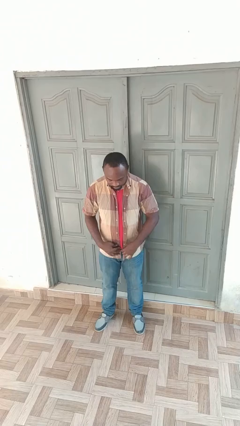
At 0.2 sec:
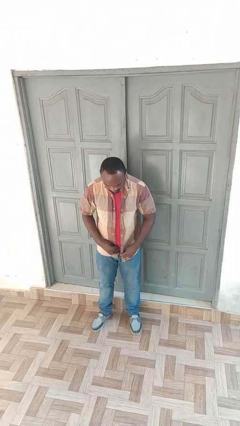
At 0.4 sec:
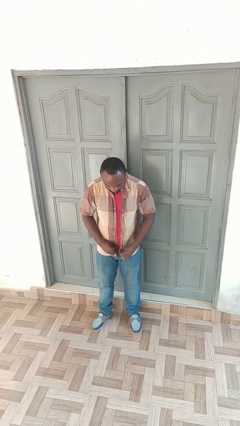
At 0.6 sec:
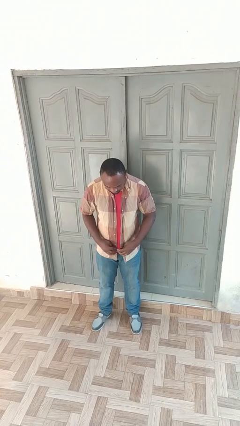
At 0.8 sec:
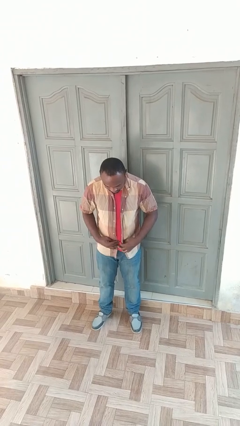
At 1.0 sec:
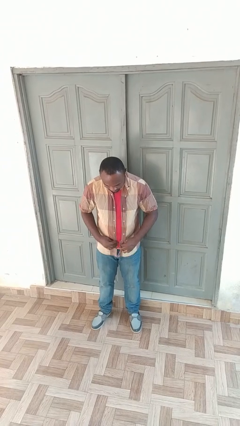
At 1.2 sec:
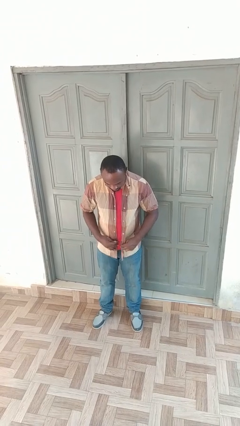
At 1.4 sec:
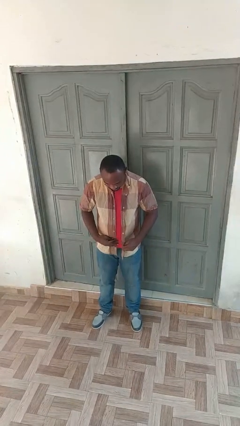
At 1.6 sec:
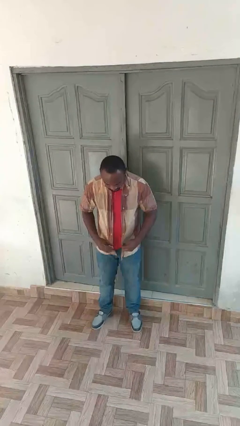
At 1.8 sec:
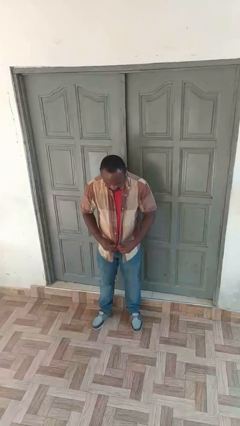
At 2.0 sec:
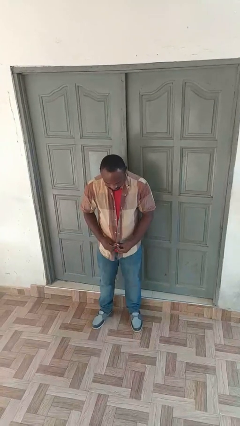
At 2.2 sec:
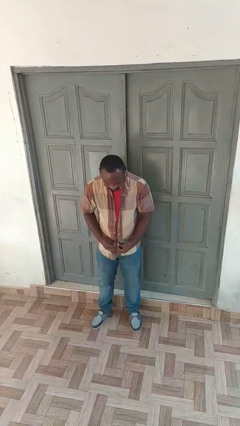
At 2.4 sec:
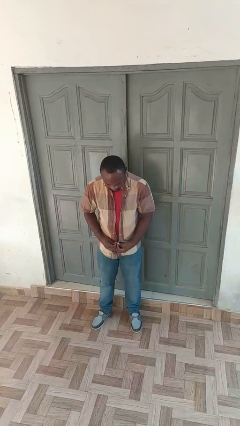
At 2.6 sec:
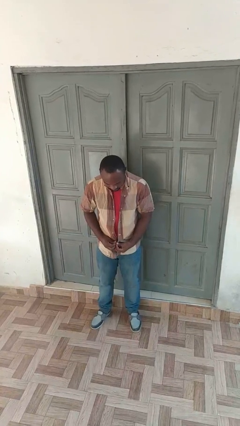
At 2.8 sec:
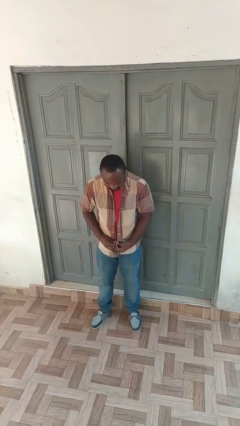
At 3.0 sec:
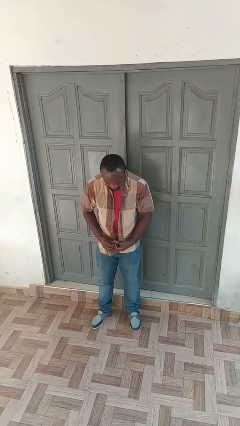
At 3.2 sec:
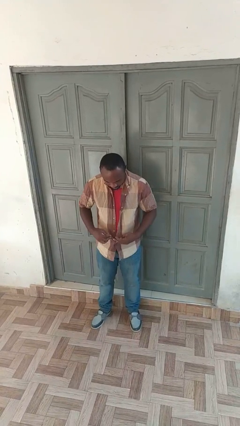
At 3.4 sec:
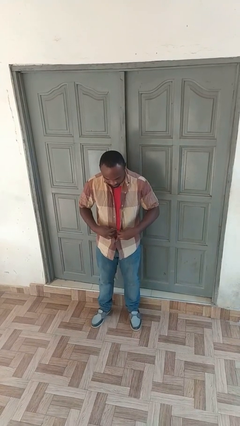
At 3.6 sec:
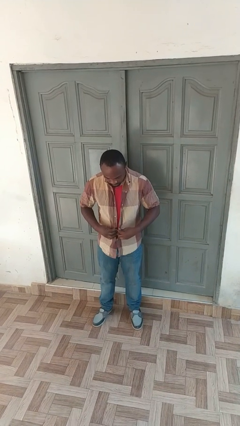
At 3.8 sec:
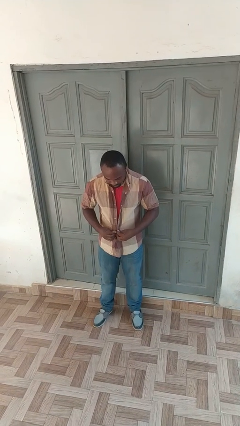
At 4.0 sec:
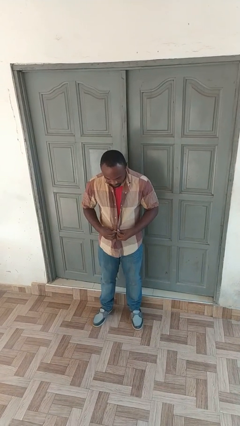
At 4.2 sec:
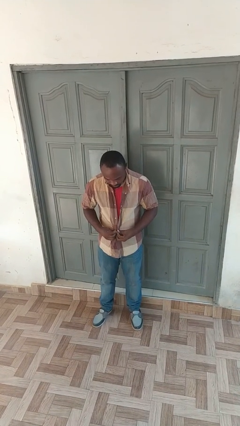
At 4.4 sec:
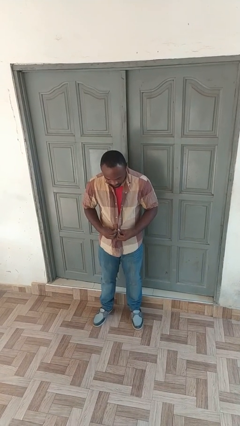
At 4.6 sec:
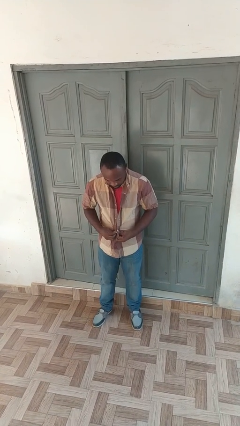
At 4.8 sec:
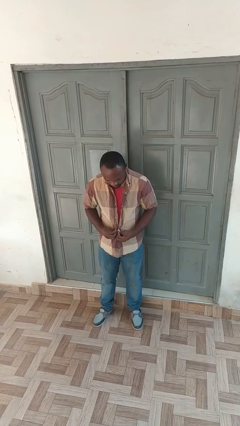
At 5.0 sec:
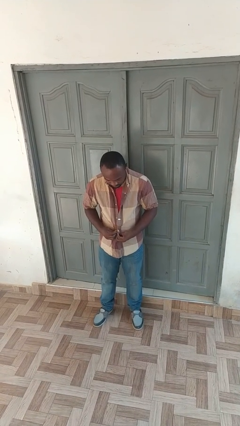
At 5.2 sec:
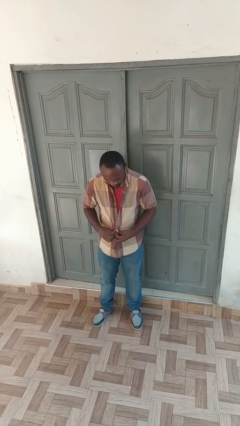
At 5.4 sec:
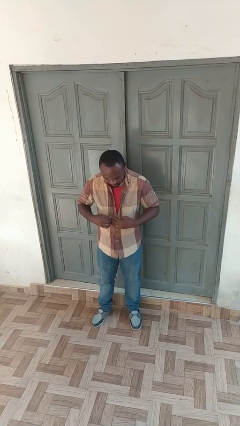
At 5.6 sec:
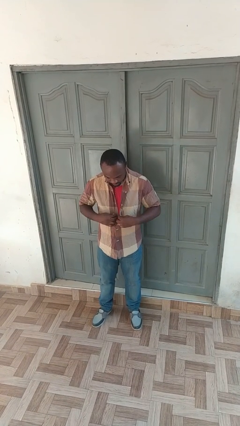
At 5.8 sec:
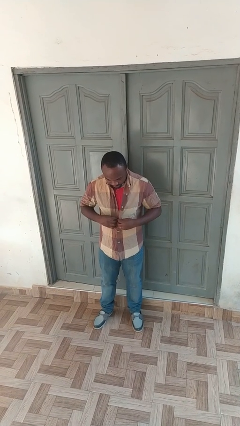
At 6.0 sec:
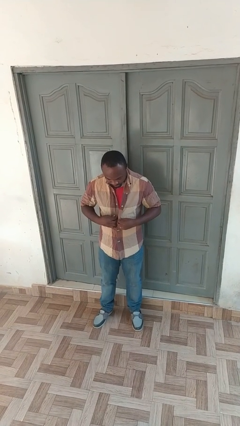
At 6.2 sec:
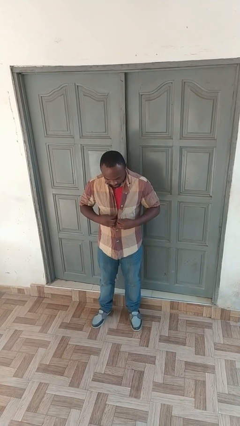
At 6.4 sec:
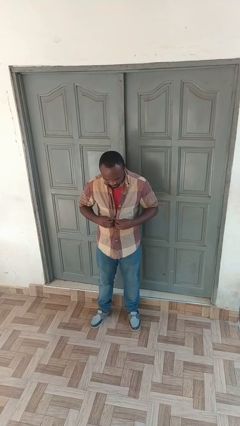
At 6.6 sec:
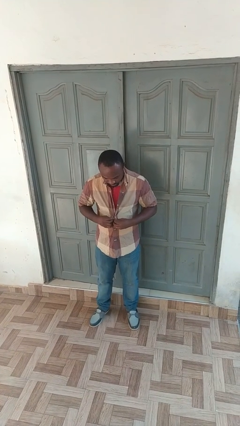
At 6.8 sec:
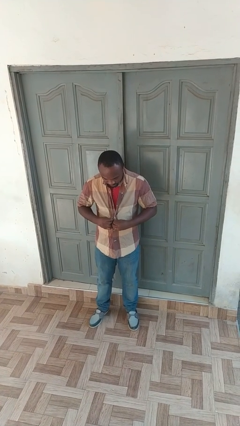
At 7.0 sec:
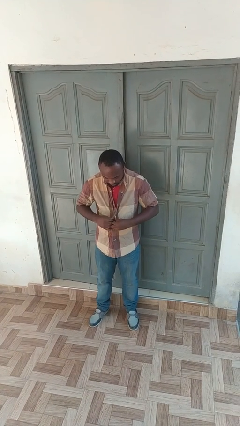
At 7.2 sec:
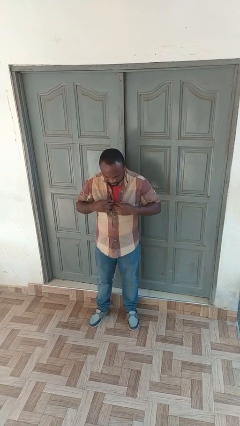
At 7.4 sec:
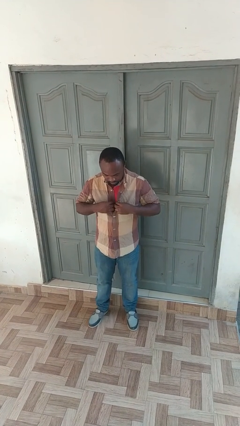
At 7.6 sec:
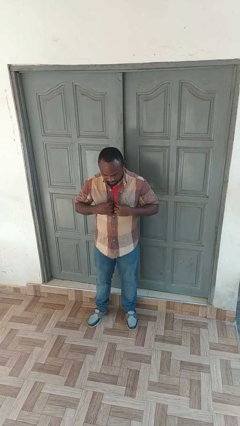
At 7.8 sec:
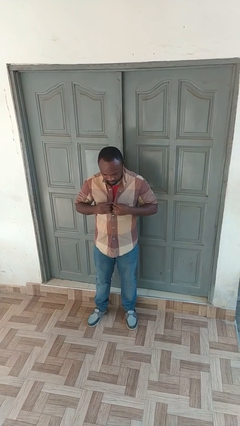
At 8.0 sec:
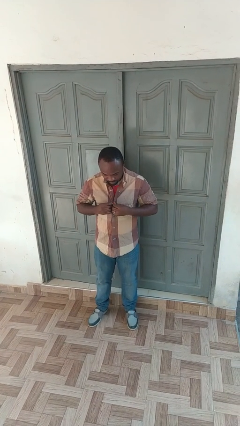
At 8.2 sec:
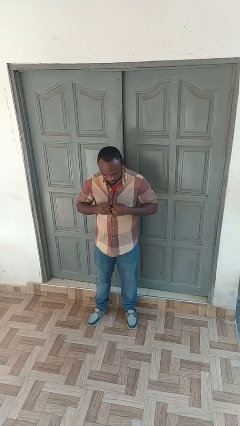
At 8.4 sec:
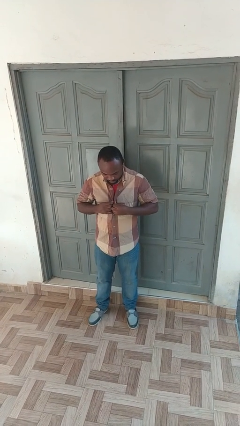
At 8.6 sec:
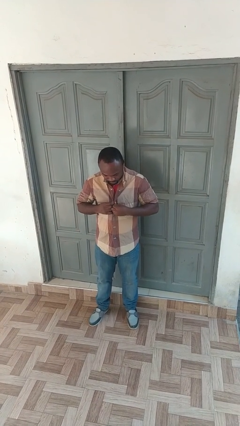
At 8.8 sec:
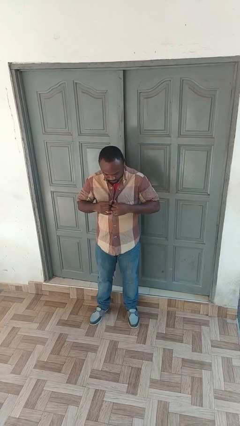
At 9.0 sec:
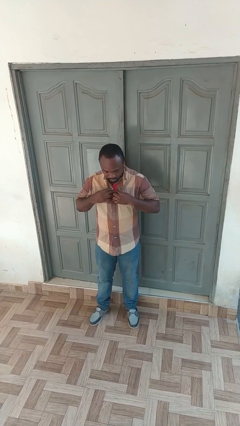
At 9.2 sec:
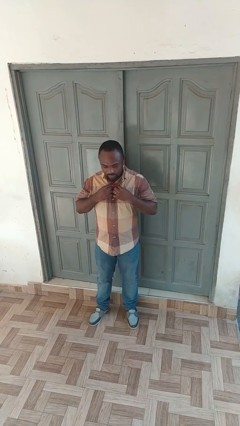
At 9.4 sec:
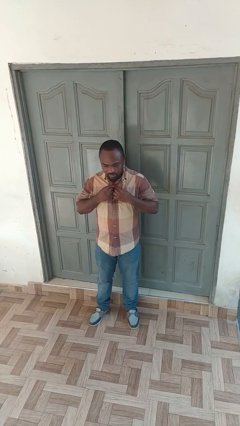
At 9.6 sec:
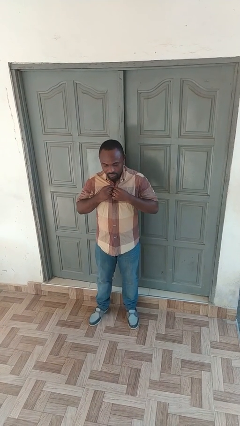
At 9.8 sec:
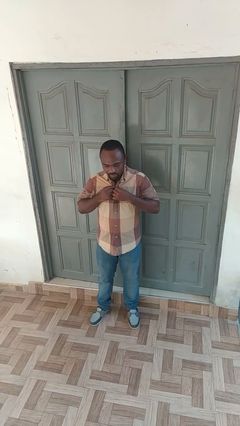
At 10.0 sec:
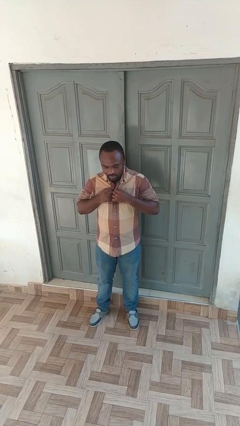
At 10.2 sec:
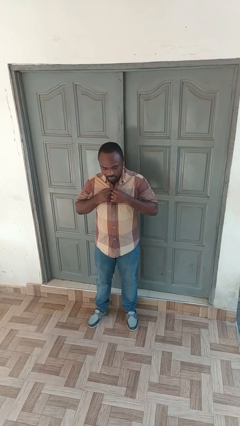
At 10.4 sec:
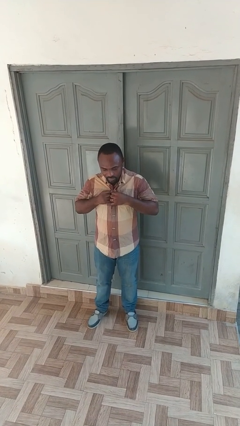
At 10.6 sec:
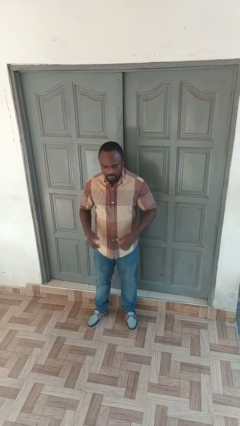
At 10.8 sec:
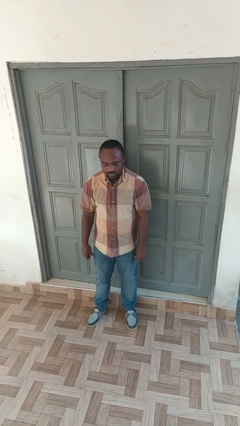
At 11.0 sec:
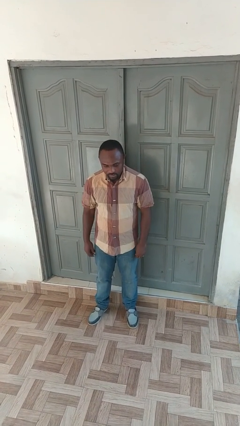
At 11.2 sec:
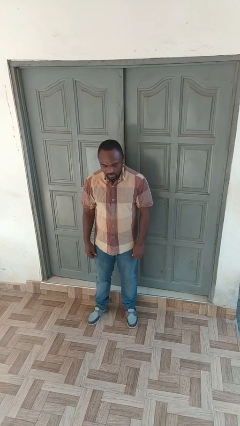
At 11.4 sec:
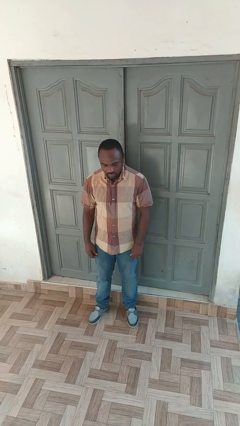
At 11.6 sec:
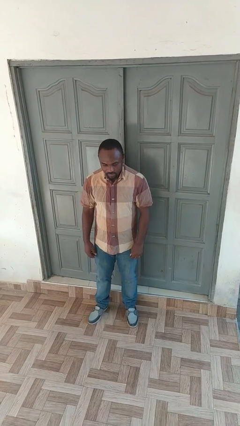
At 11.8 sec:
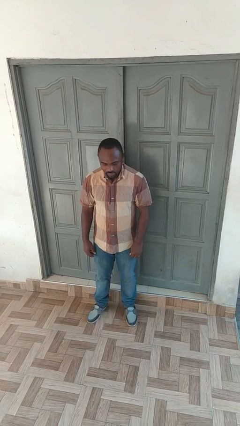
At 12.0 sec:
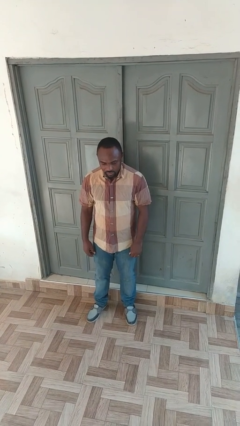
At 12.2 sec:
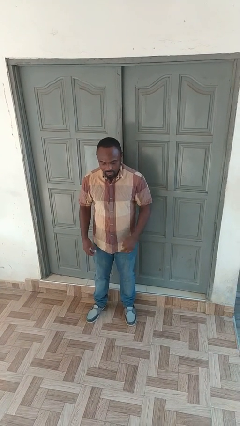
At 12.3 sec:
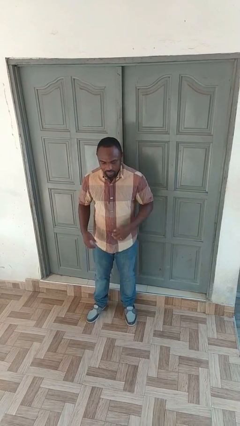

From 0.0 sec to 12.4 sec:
person buttons shirt

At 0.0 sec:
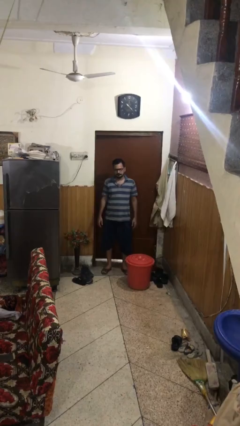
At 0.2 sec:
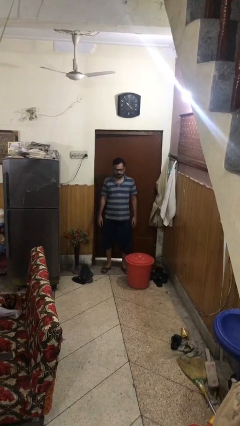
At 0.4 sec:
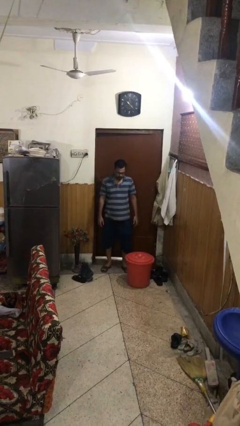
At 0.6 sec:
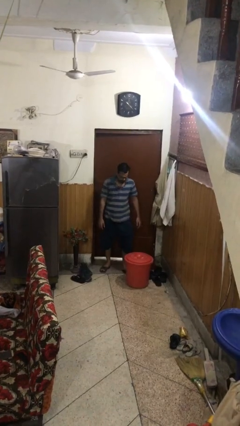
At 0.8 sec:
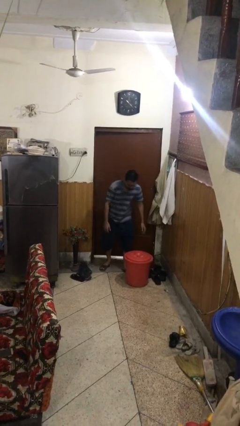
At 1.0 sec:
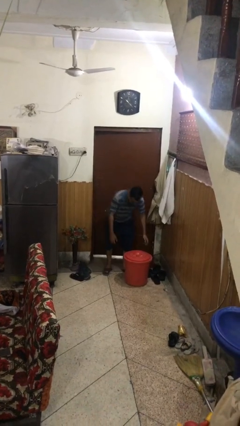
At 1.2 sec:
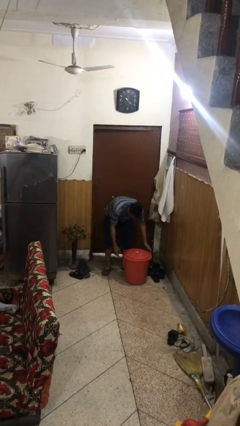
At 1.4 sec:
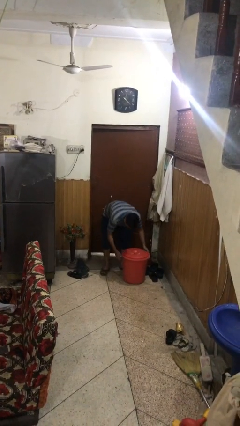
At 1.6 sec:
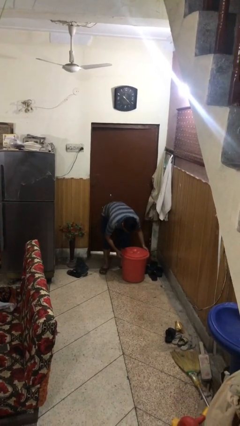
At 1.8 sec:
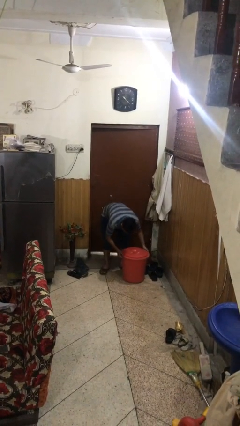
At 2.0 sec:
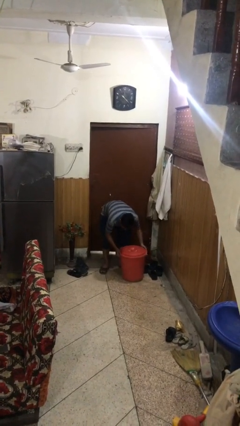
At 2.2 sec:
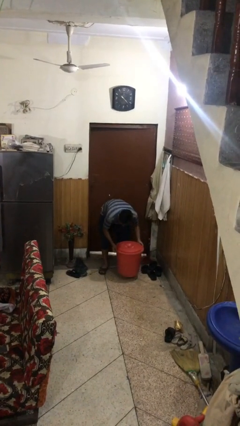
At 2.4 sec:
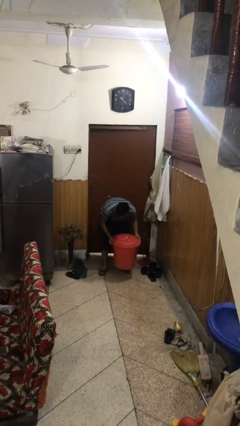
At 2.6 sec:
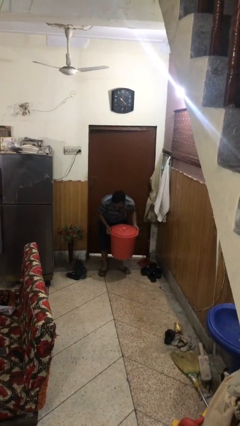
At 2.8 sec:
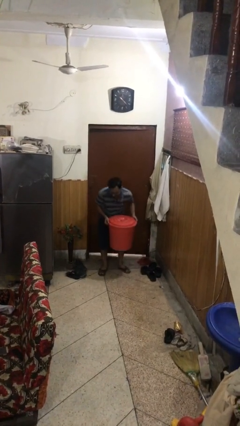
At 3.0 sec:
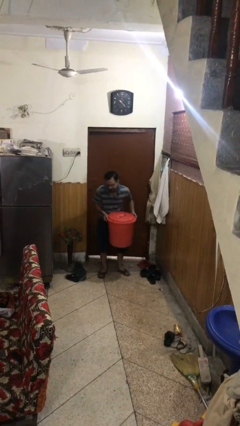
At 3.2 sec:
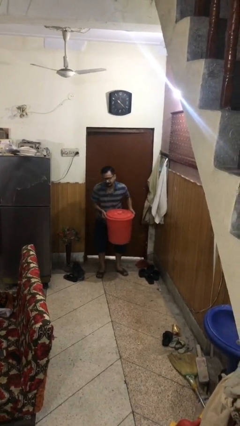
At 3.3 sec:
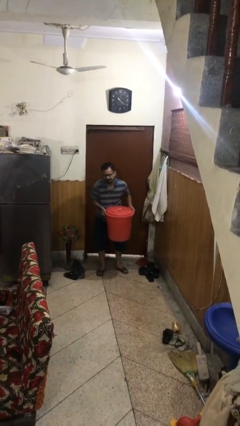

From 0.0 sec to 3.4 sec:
person picks up object from floor

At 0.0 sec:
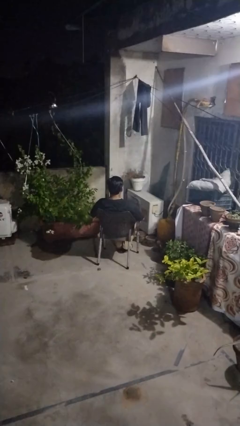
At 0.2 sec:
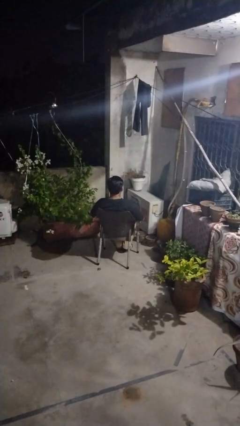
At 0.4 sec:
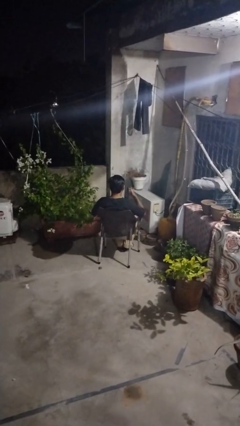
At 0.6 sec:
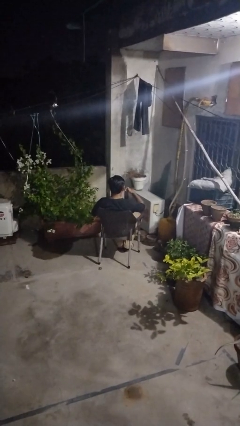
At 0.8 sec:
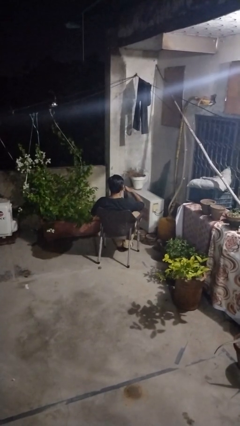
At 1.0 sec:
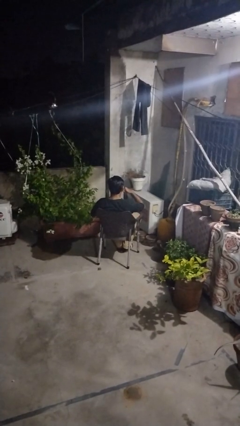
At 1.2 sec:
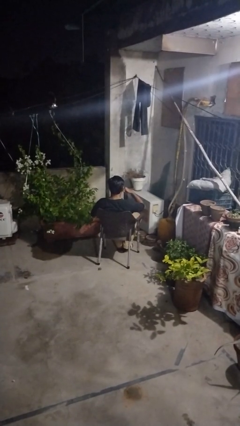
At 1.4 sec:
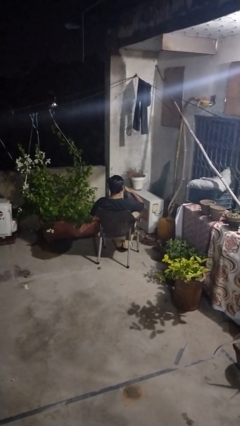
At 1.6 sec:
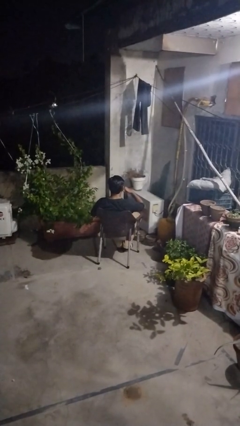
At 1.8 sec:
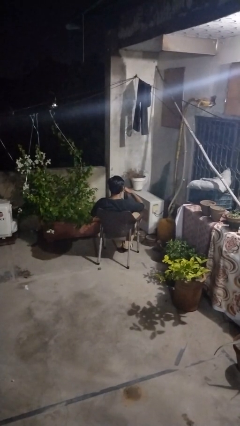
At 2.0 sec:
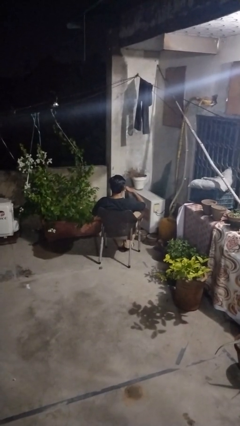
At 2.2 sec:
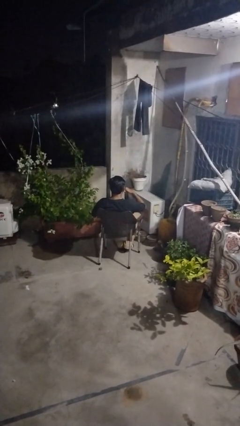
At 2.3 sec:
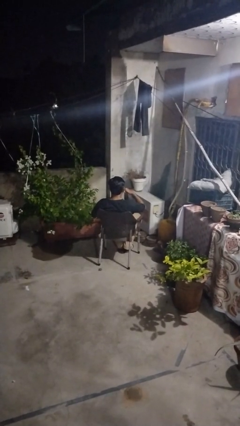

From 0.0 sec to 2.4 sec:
person gestures call me
